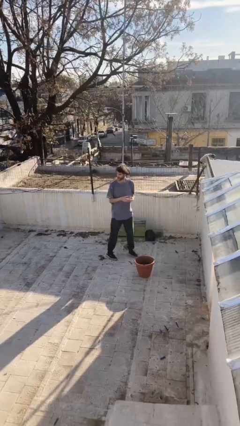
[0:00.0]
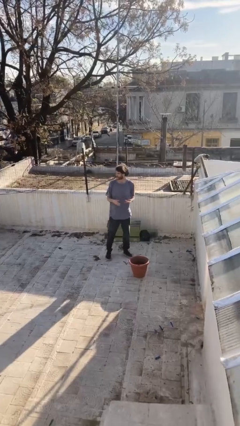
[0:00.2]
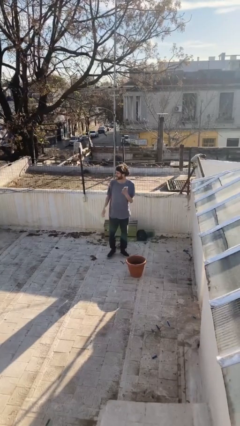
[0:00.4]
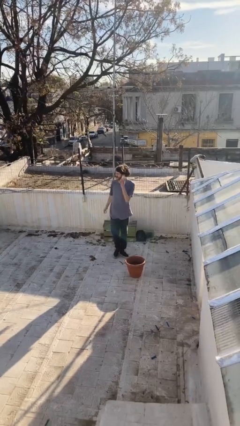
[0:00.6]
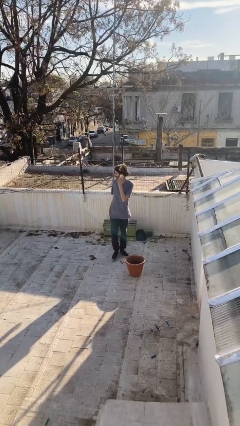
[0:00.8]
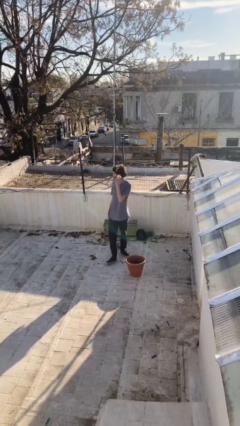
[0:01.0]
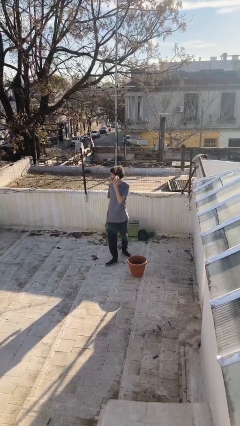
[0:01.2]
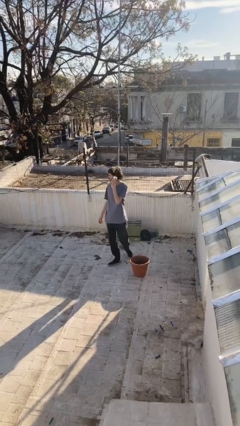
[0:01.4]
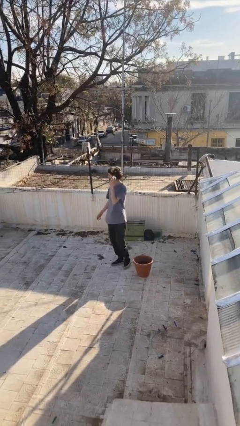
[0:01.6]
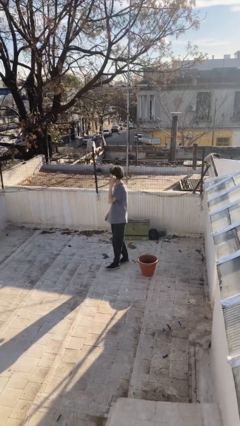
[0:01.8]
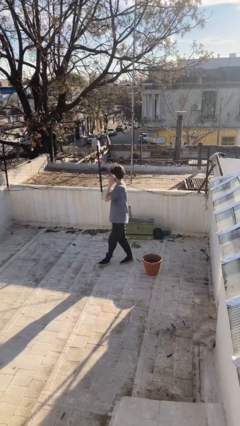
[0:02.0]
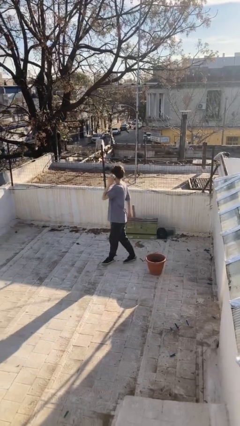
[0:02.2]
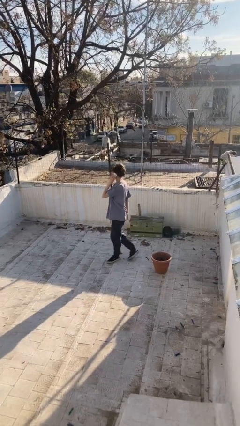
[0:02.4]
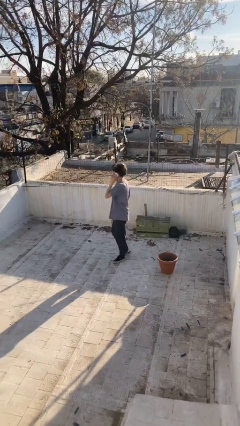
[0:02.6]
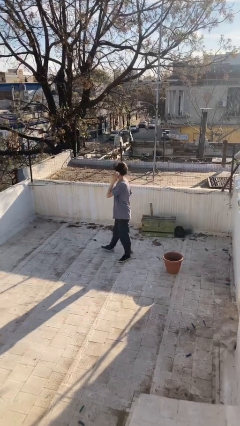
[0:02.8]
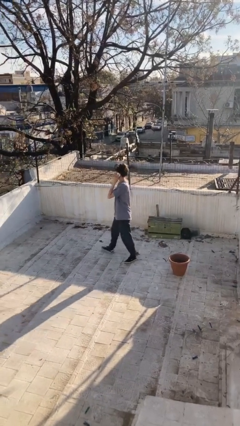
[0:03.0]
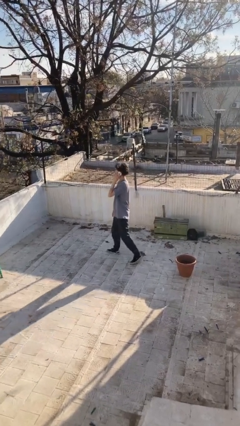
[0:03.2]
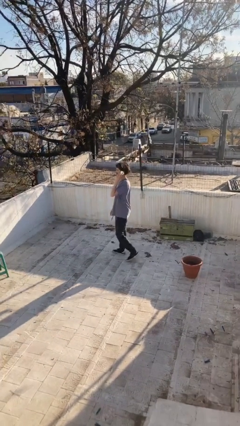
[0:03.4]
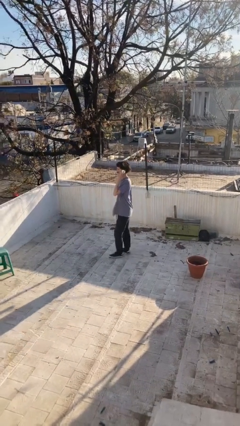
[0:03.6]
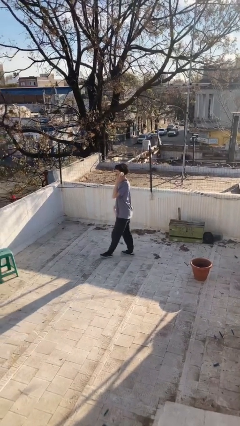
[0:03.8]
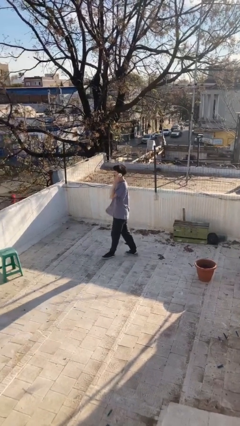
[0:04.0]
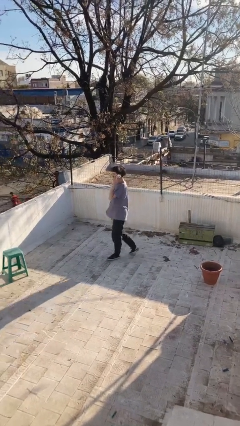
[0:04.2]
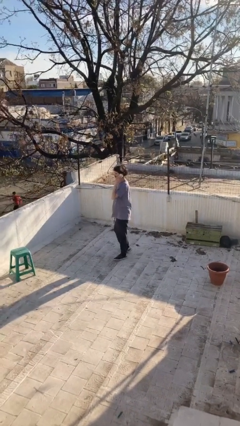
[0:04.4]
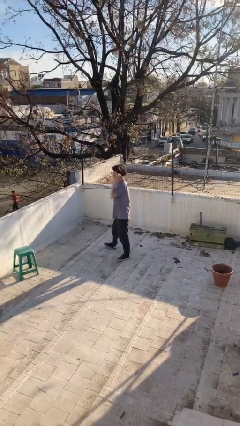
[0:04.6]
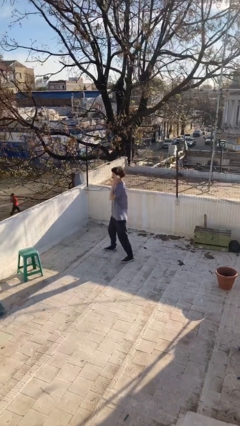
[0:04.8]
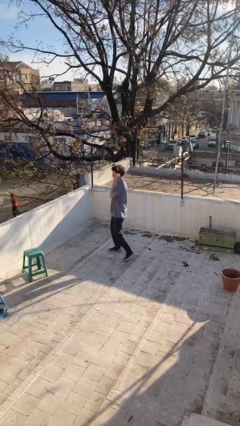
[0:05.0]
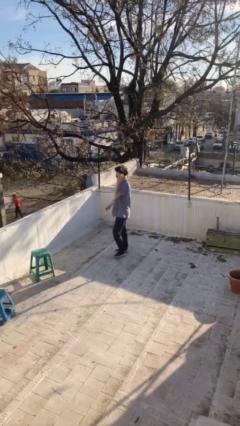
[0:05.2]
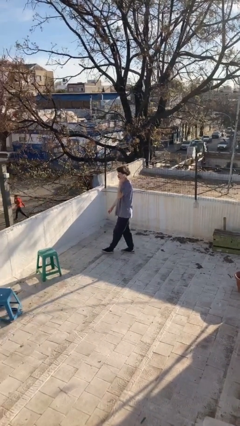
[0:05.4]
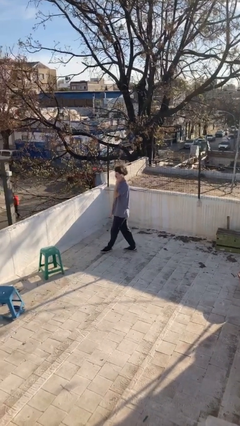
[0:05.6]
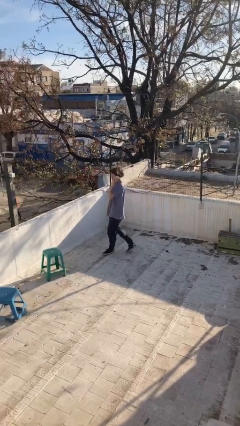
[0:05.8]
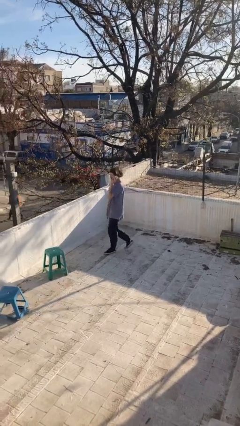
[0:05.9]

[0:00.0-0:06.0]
person talks on phone

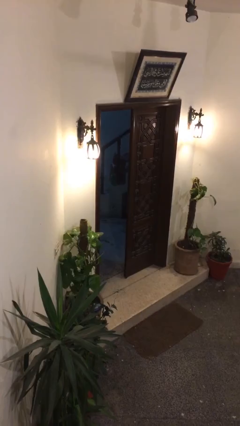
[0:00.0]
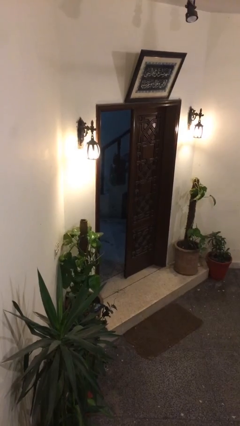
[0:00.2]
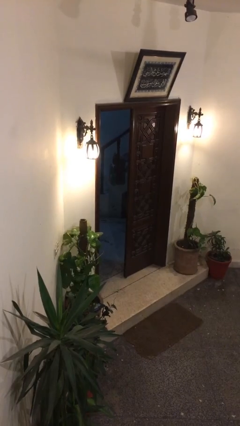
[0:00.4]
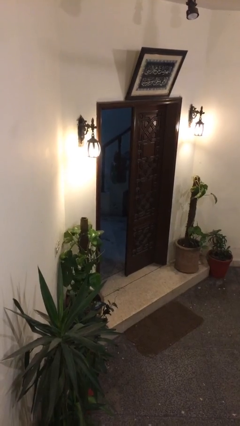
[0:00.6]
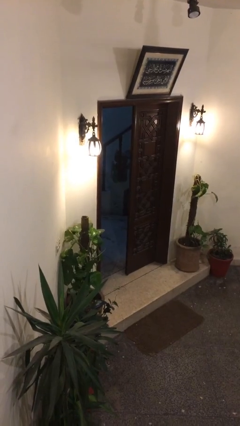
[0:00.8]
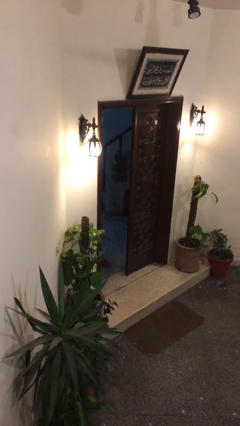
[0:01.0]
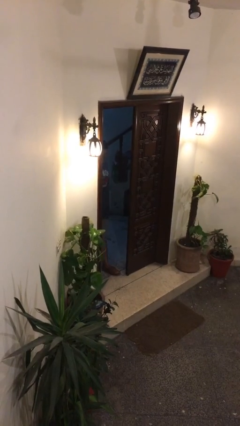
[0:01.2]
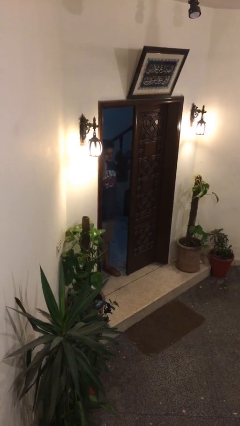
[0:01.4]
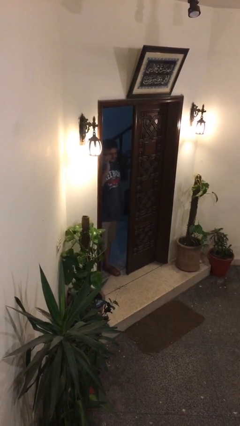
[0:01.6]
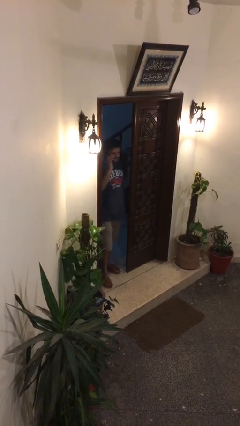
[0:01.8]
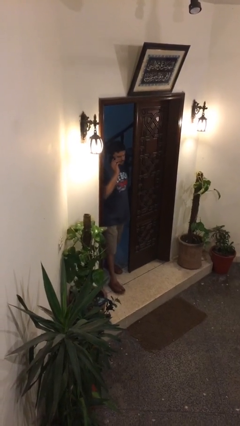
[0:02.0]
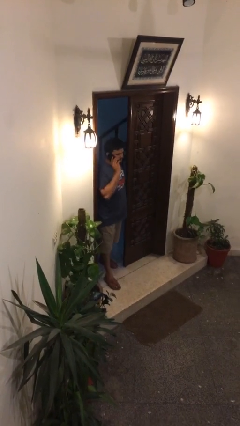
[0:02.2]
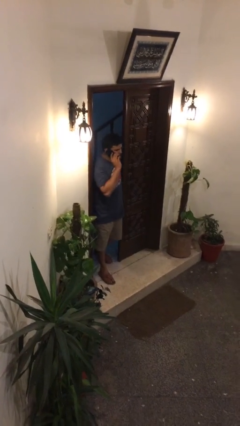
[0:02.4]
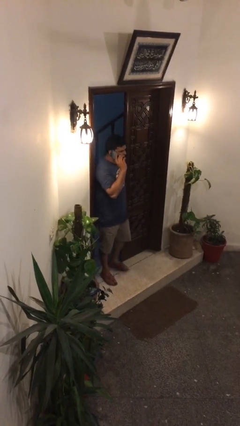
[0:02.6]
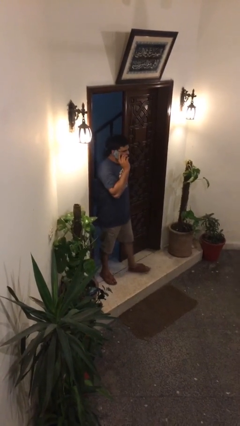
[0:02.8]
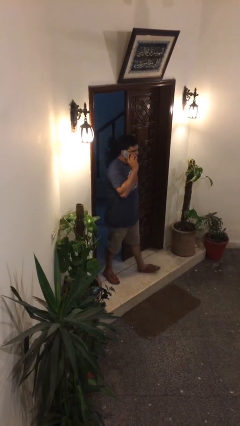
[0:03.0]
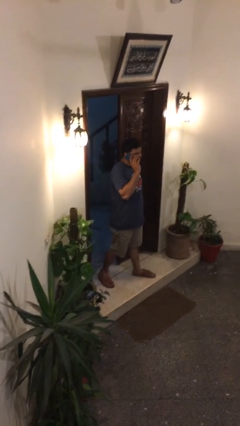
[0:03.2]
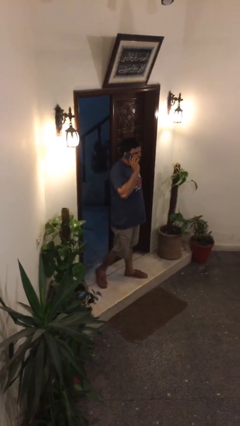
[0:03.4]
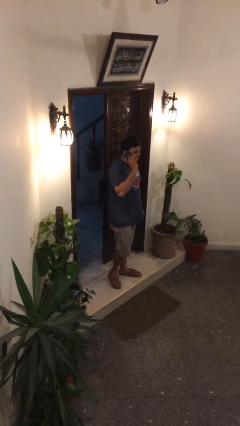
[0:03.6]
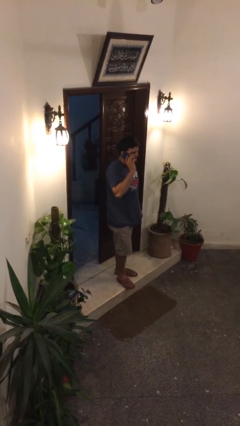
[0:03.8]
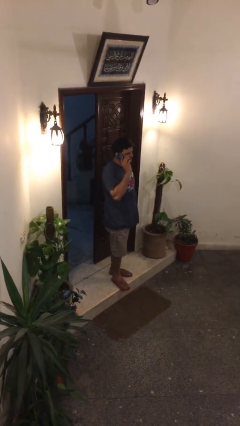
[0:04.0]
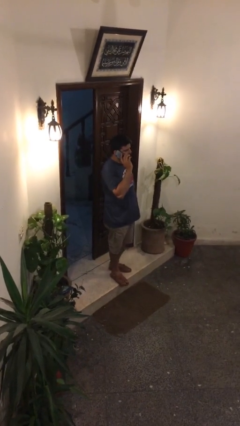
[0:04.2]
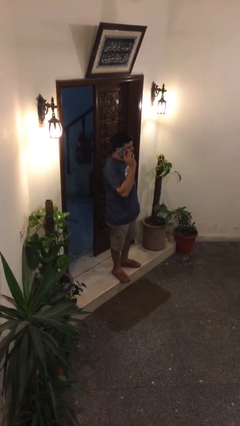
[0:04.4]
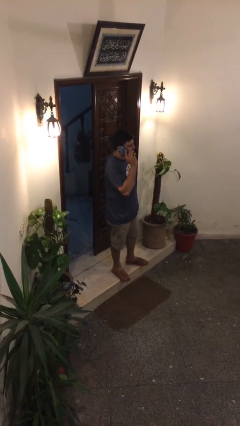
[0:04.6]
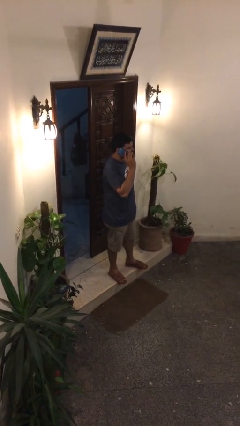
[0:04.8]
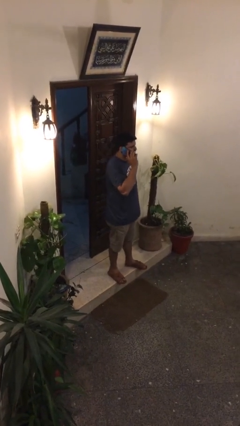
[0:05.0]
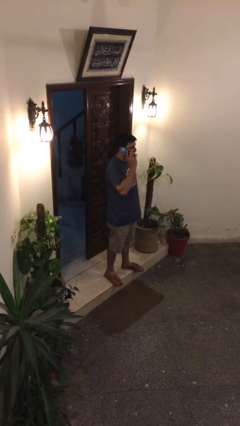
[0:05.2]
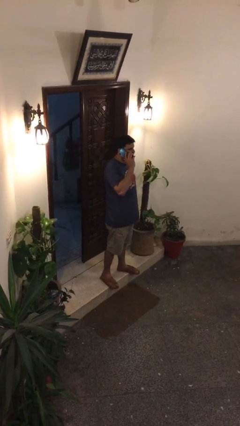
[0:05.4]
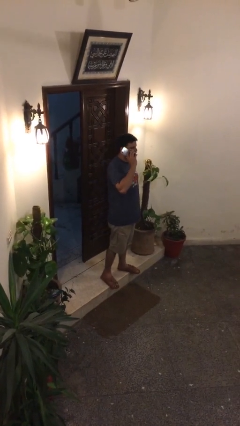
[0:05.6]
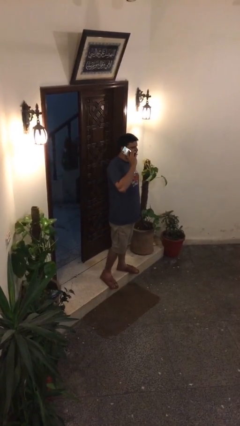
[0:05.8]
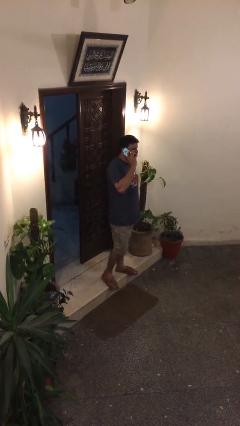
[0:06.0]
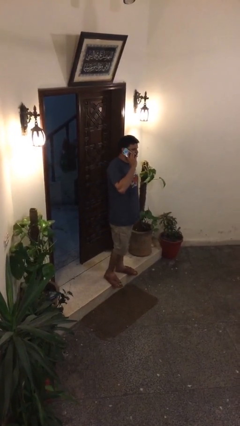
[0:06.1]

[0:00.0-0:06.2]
person enters scene through structure

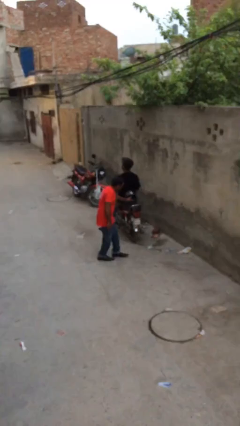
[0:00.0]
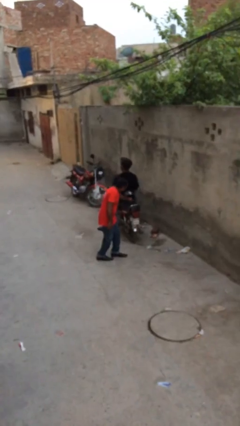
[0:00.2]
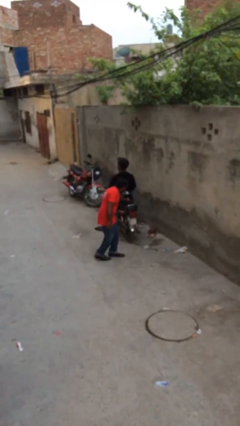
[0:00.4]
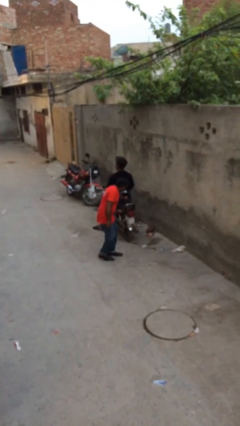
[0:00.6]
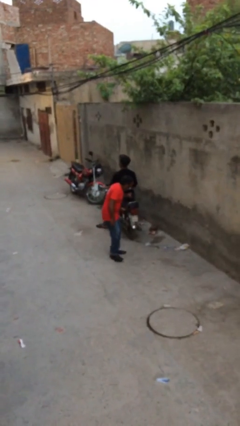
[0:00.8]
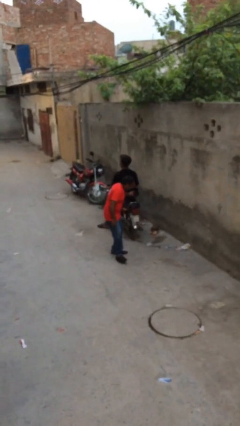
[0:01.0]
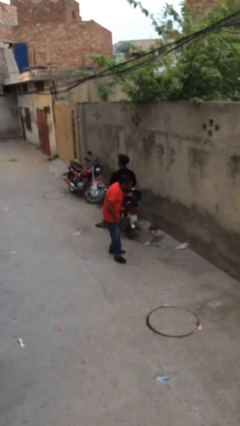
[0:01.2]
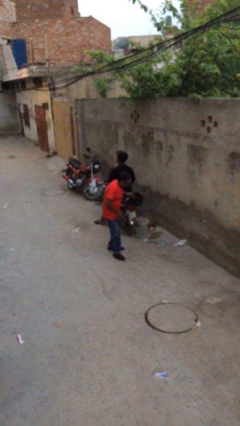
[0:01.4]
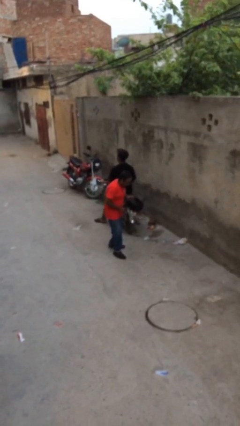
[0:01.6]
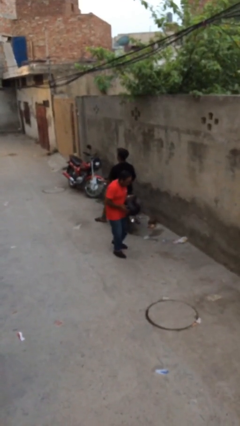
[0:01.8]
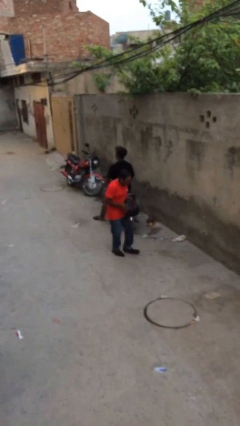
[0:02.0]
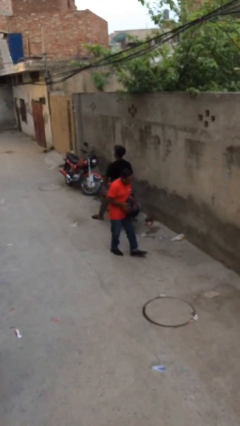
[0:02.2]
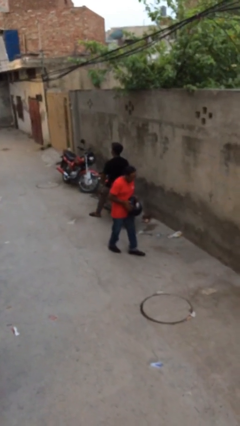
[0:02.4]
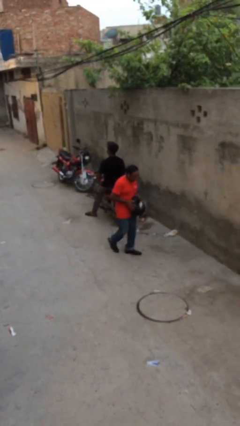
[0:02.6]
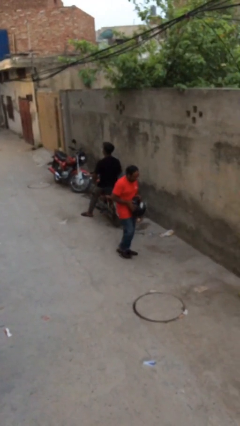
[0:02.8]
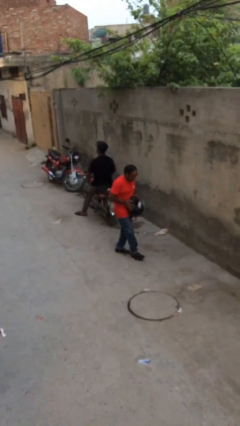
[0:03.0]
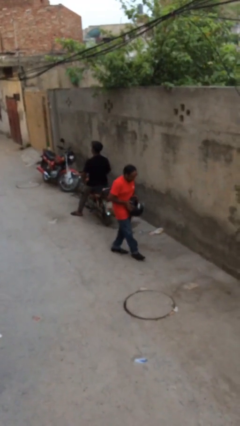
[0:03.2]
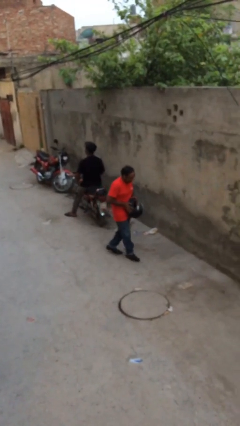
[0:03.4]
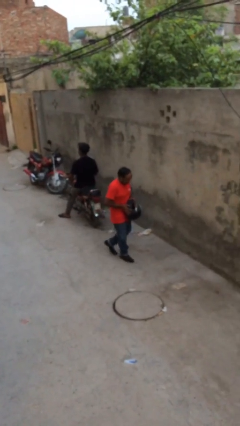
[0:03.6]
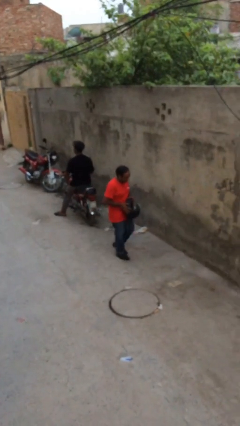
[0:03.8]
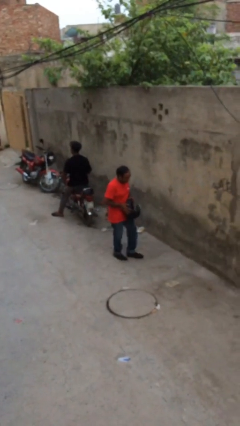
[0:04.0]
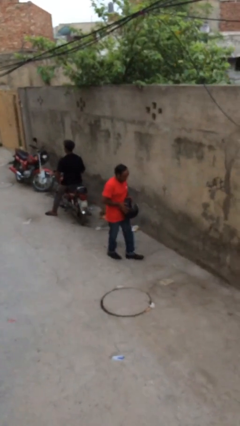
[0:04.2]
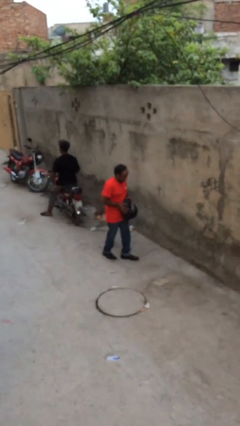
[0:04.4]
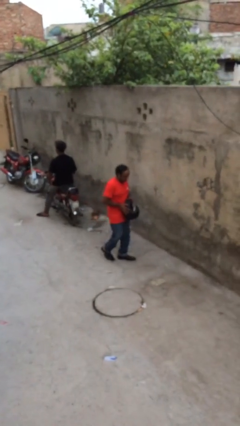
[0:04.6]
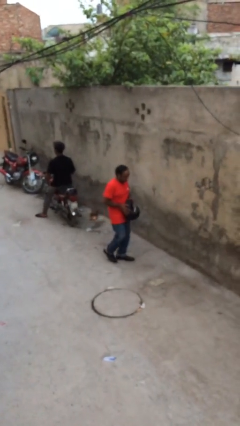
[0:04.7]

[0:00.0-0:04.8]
person steals object from person

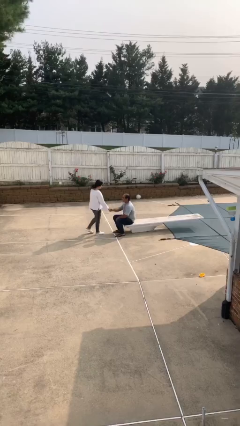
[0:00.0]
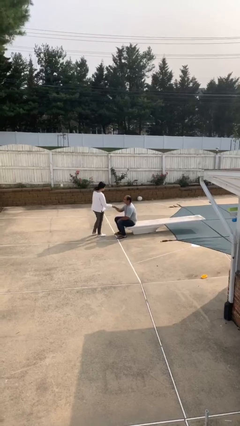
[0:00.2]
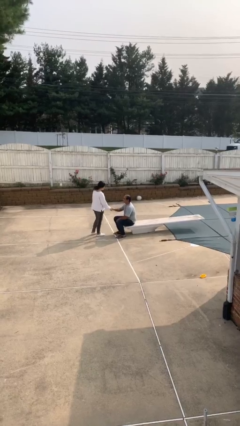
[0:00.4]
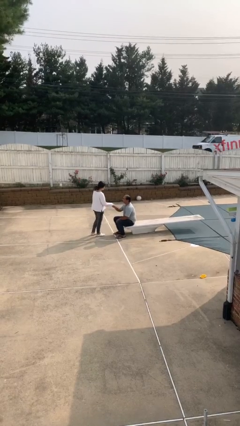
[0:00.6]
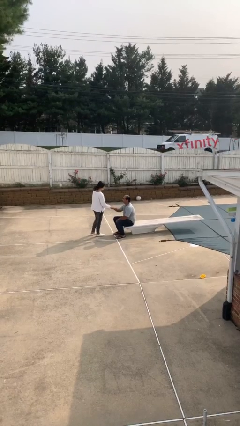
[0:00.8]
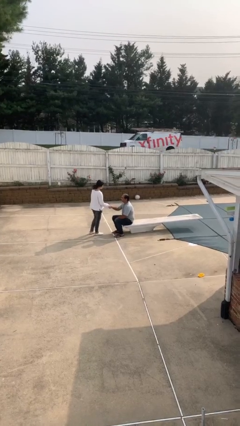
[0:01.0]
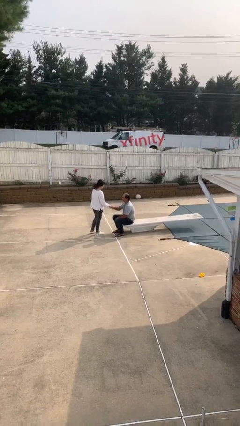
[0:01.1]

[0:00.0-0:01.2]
person shakes hand
